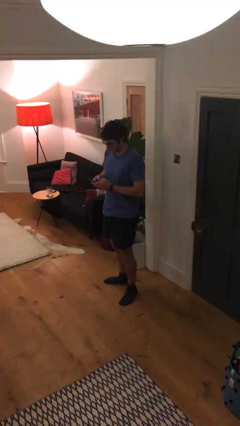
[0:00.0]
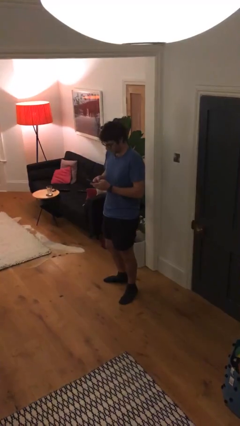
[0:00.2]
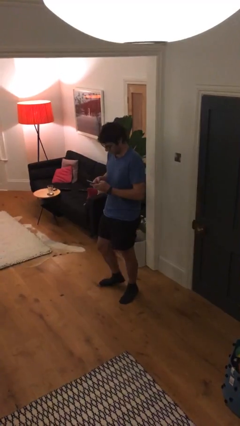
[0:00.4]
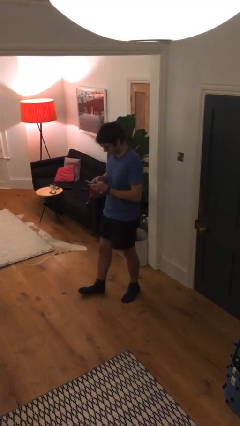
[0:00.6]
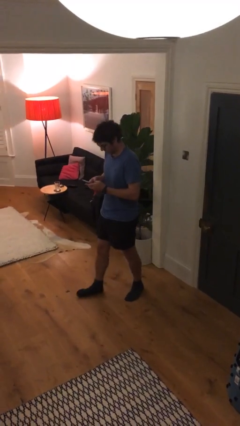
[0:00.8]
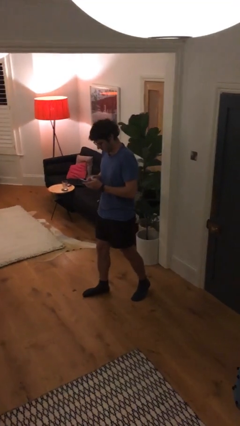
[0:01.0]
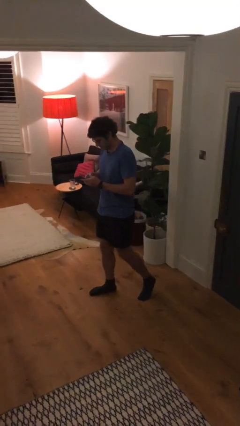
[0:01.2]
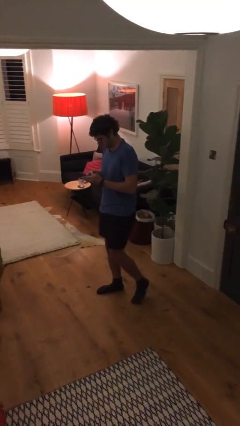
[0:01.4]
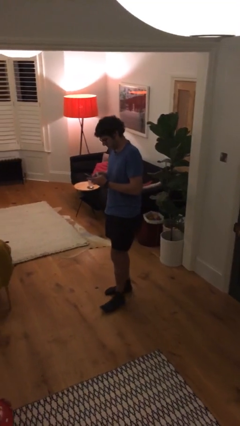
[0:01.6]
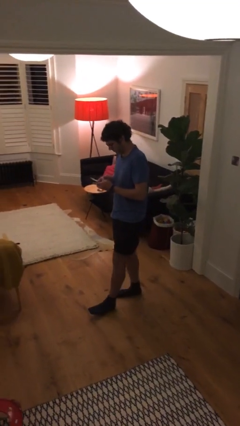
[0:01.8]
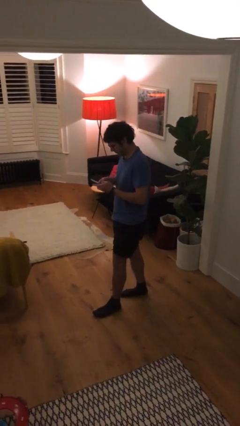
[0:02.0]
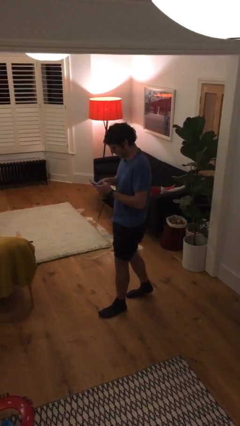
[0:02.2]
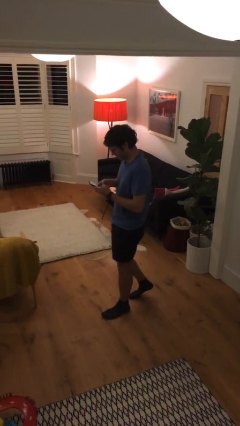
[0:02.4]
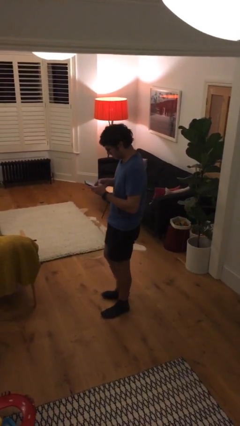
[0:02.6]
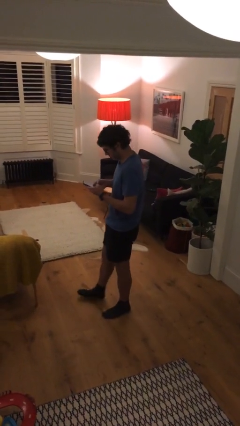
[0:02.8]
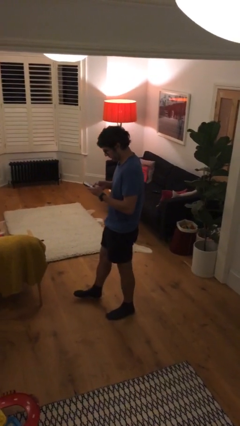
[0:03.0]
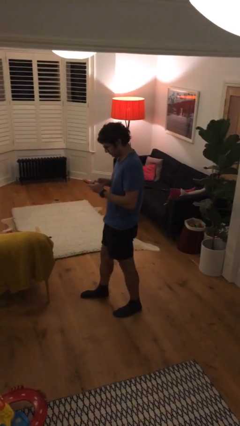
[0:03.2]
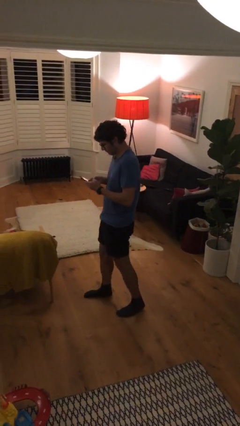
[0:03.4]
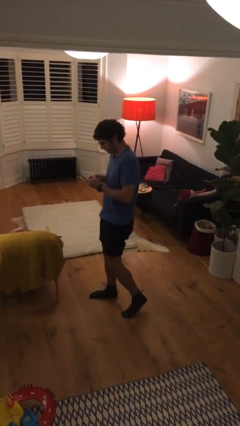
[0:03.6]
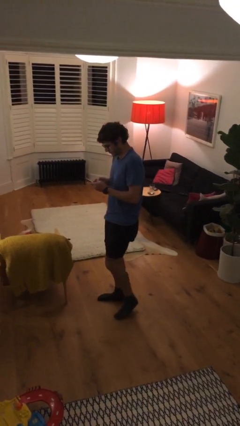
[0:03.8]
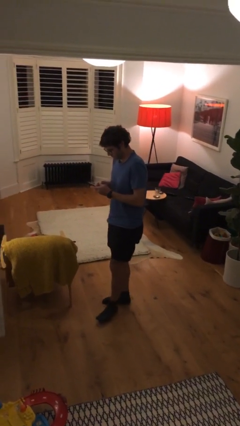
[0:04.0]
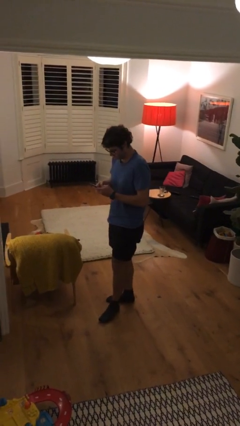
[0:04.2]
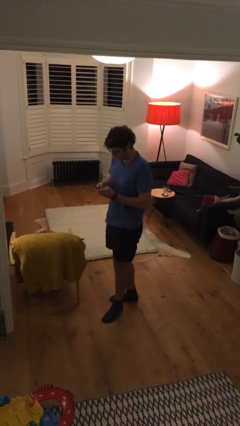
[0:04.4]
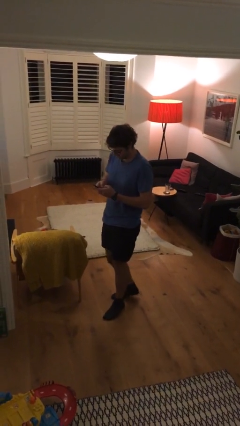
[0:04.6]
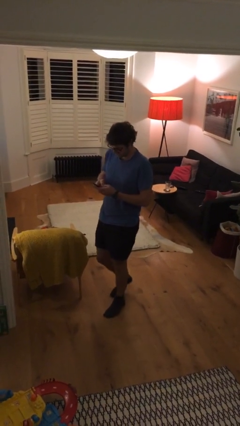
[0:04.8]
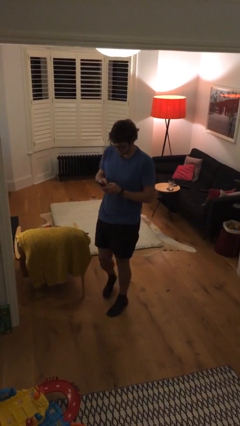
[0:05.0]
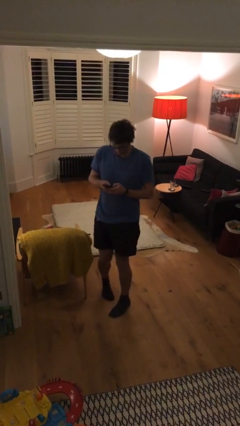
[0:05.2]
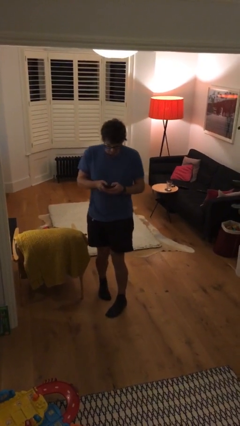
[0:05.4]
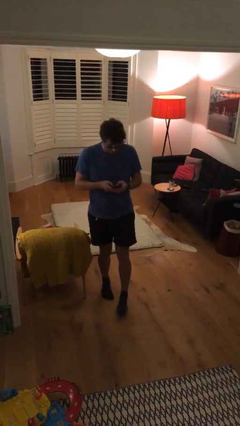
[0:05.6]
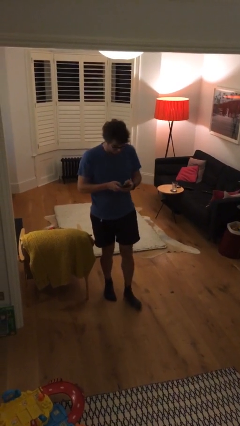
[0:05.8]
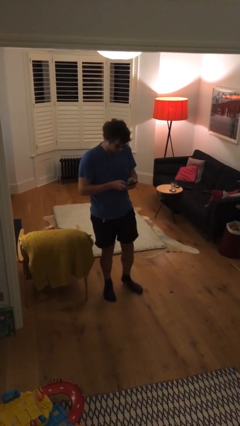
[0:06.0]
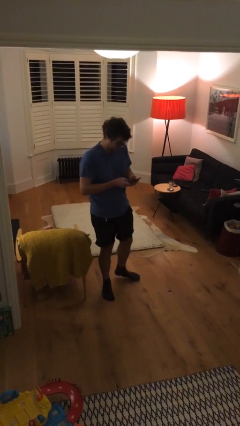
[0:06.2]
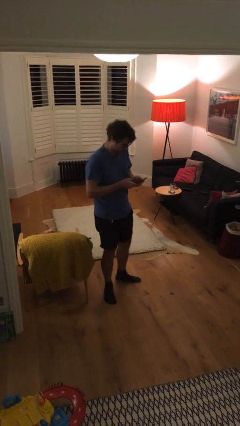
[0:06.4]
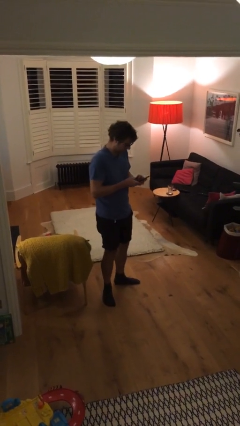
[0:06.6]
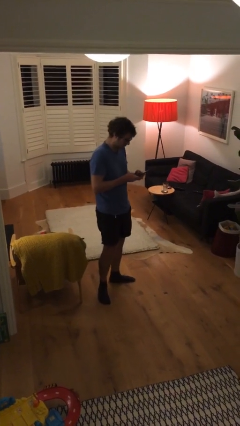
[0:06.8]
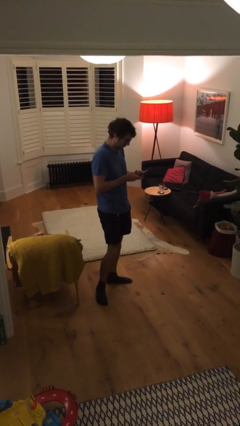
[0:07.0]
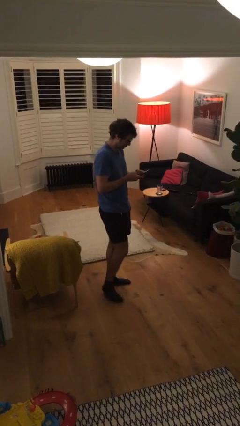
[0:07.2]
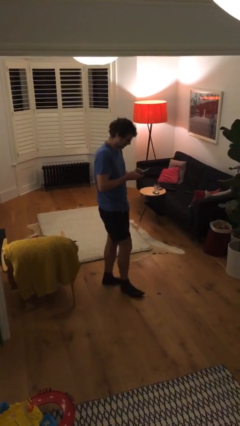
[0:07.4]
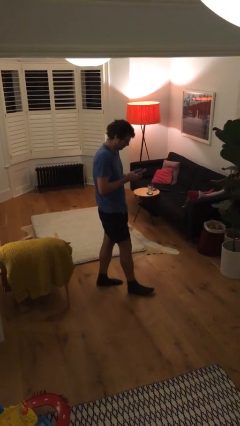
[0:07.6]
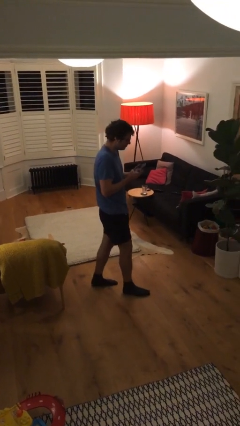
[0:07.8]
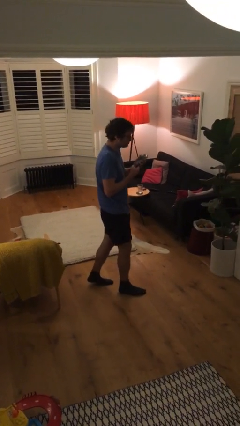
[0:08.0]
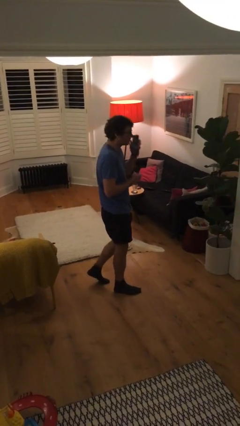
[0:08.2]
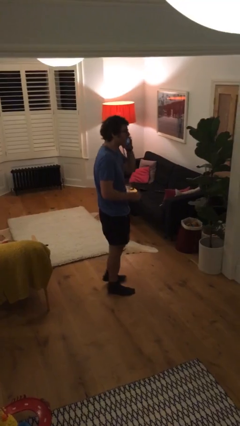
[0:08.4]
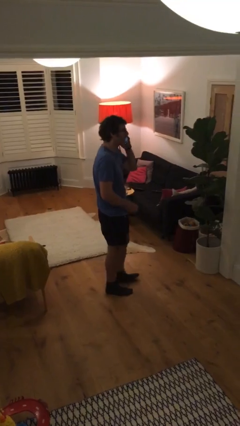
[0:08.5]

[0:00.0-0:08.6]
person texts on phone

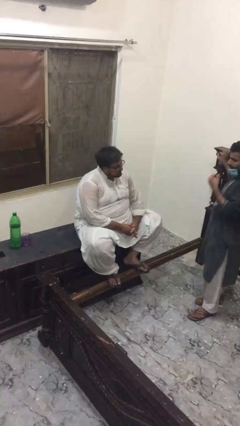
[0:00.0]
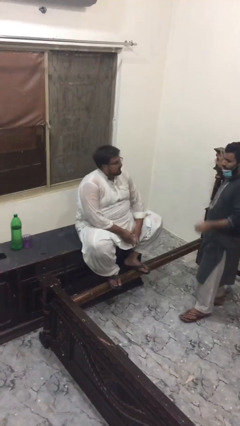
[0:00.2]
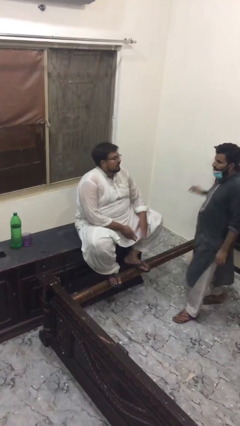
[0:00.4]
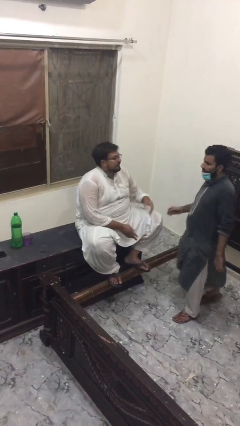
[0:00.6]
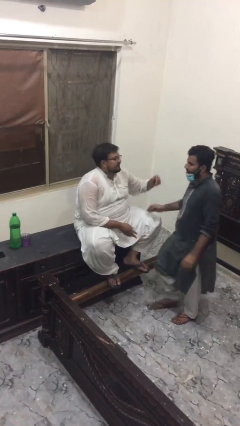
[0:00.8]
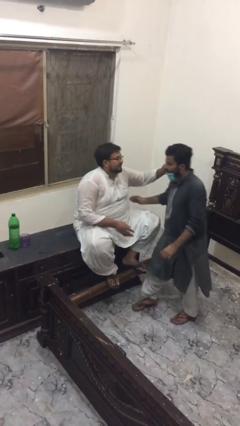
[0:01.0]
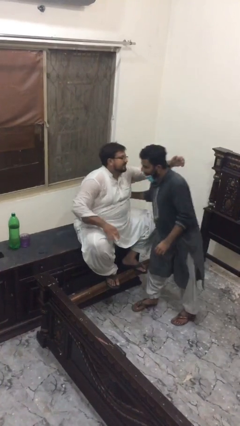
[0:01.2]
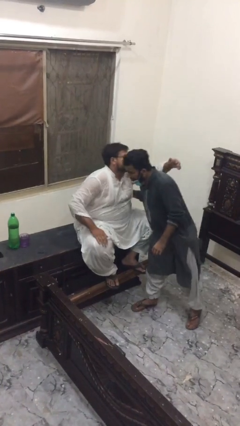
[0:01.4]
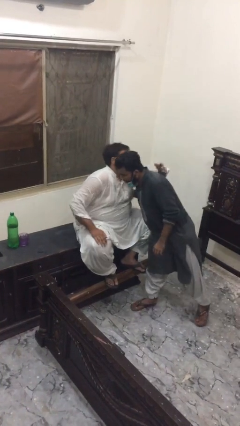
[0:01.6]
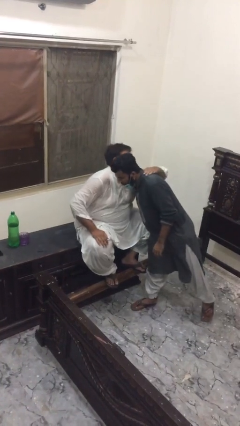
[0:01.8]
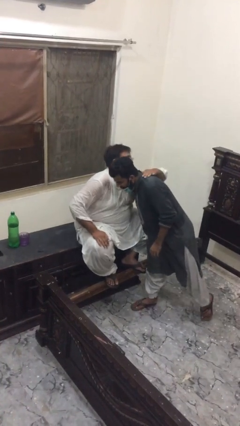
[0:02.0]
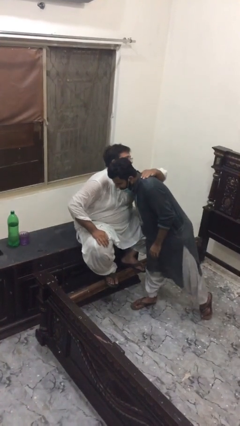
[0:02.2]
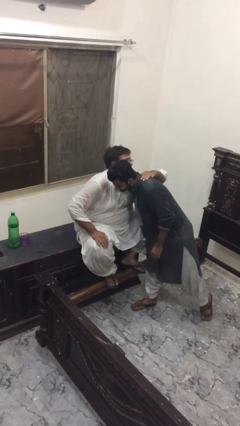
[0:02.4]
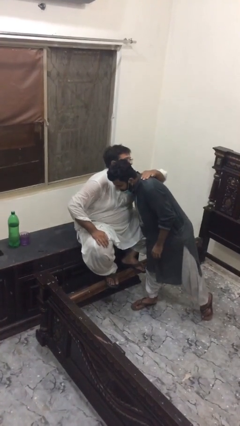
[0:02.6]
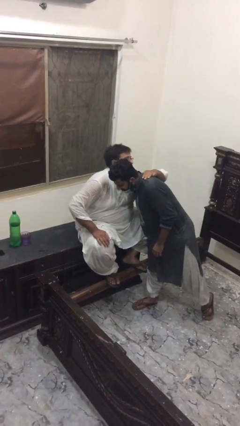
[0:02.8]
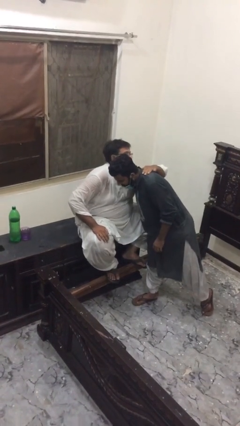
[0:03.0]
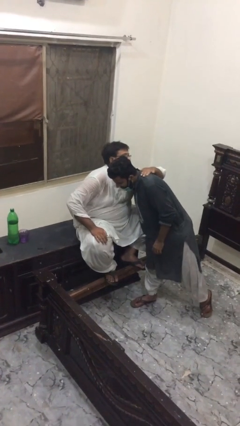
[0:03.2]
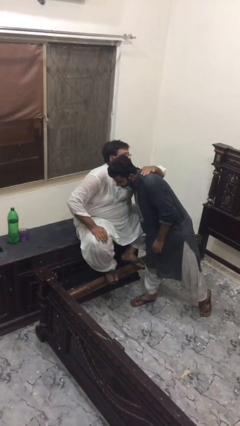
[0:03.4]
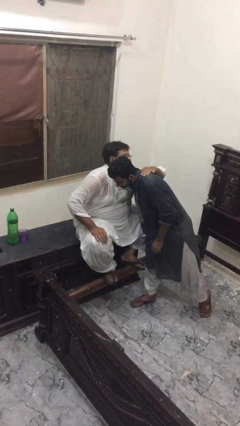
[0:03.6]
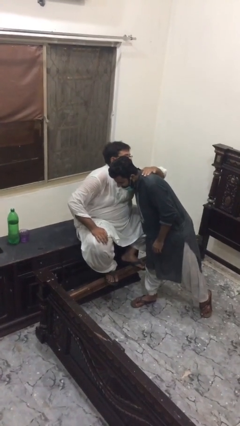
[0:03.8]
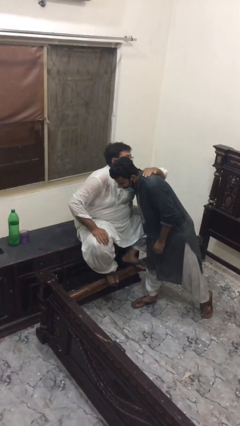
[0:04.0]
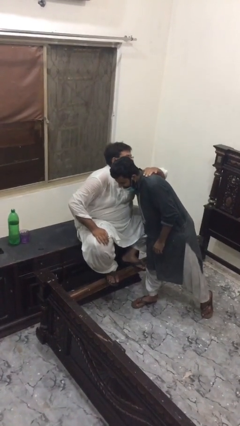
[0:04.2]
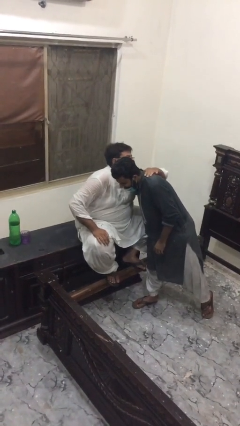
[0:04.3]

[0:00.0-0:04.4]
person embraces person

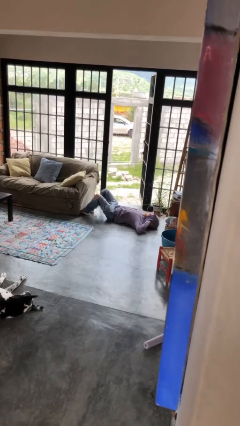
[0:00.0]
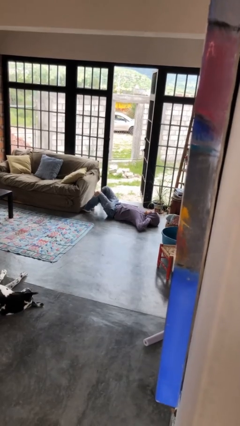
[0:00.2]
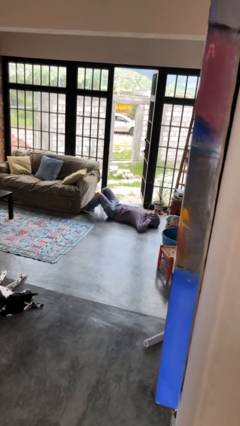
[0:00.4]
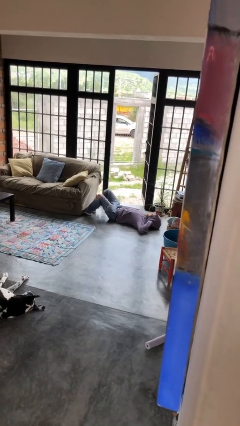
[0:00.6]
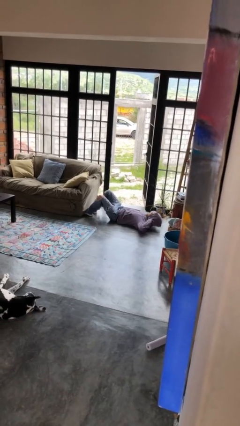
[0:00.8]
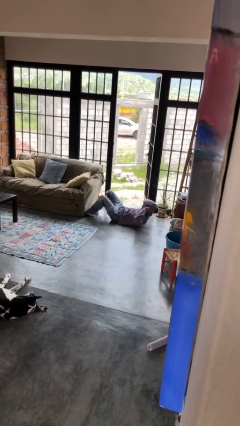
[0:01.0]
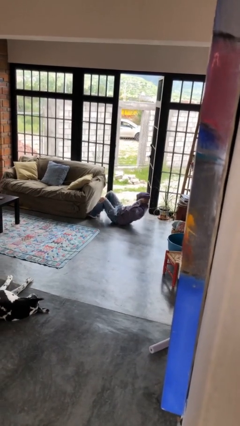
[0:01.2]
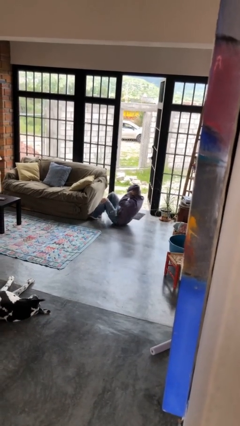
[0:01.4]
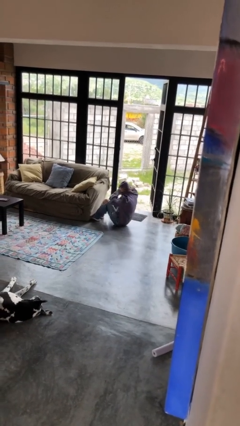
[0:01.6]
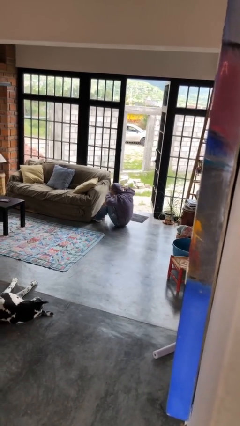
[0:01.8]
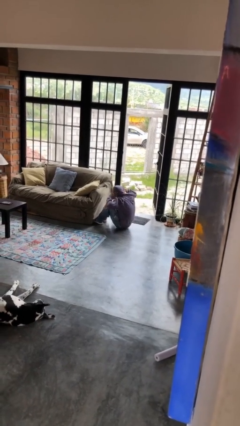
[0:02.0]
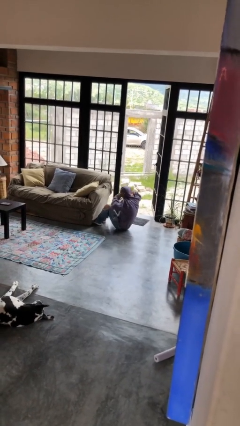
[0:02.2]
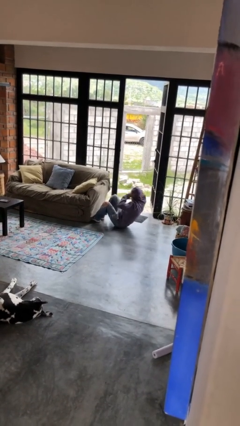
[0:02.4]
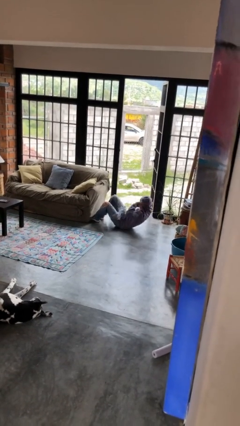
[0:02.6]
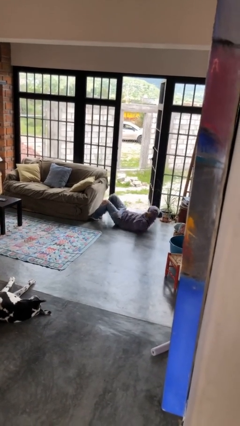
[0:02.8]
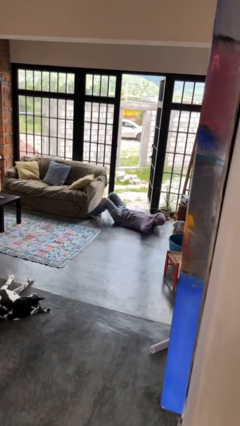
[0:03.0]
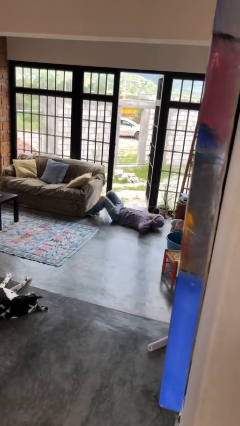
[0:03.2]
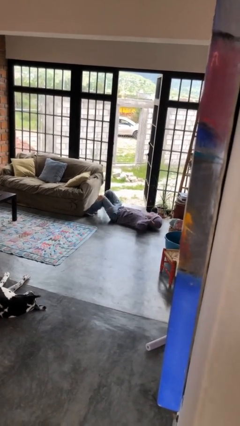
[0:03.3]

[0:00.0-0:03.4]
person exercises with situp

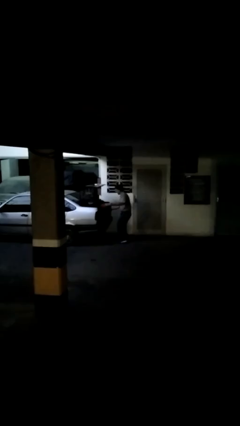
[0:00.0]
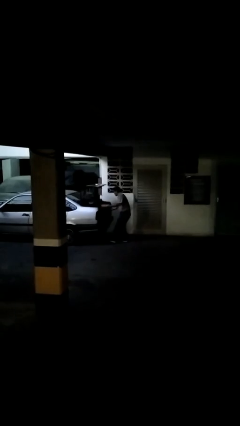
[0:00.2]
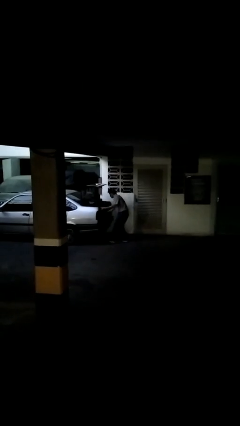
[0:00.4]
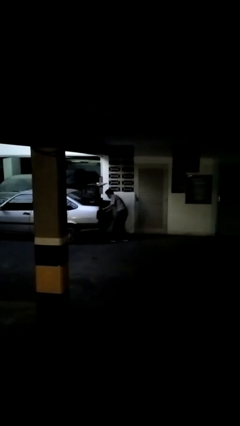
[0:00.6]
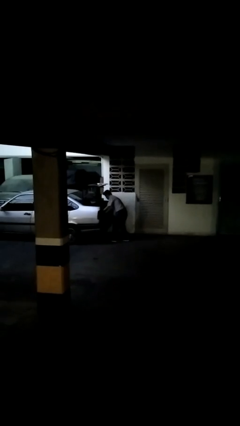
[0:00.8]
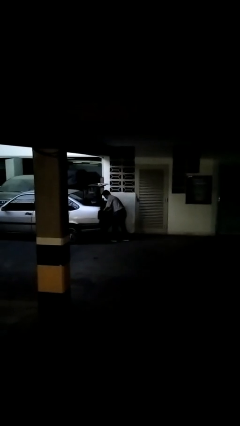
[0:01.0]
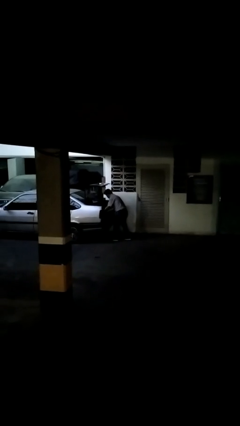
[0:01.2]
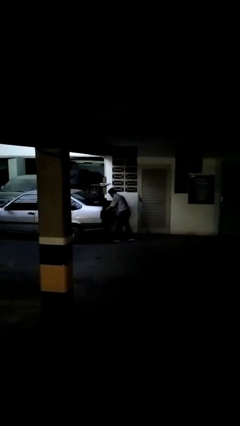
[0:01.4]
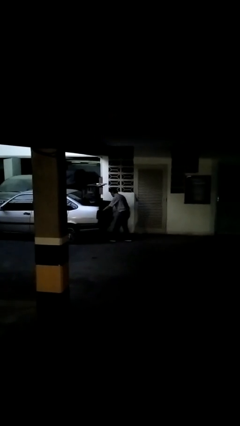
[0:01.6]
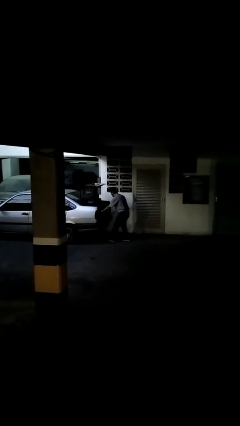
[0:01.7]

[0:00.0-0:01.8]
person loads car
